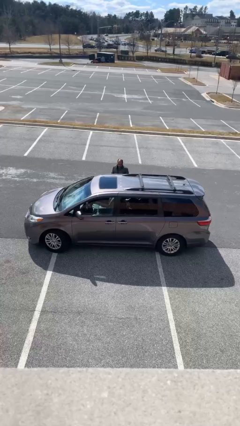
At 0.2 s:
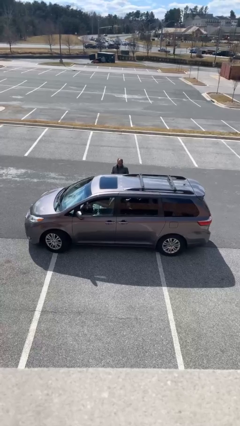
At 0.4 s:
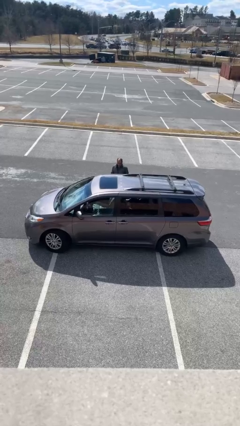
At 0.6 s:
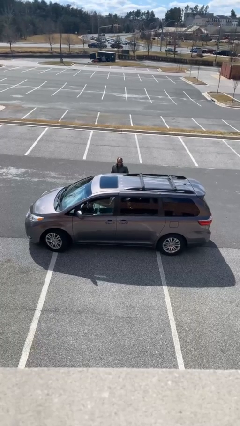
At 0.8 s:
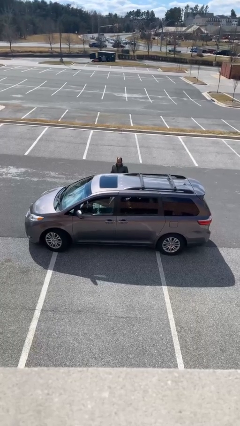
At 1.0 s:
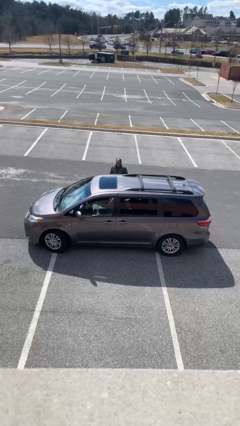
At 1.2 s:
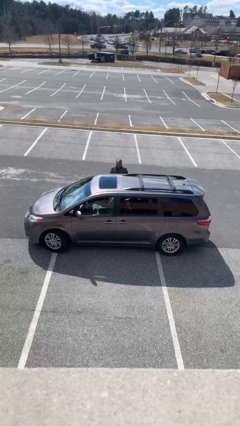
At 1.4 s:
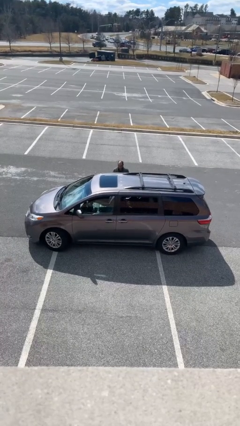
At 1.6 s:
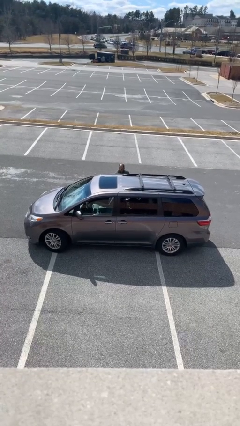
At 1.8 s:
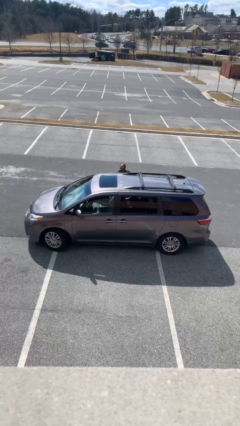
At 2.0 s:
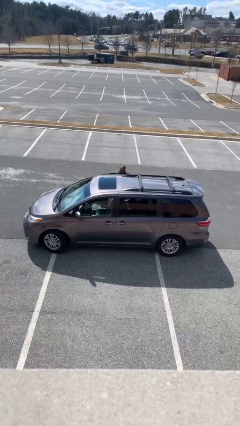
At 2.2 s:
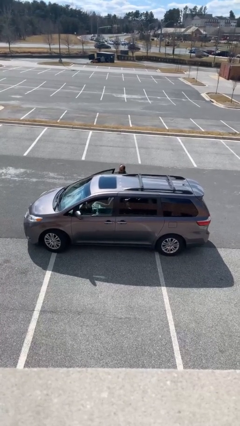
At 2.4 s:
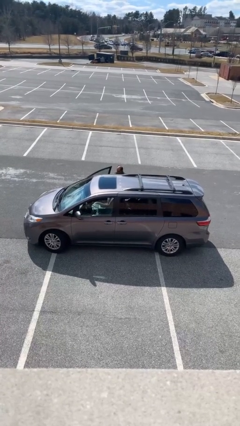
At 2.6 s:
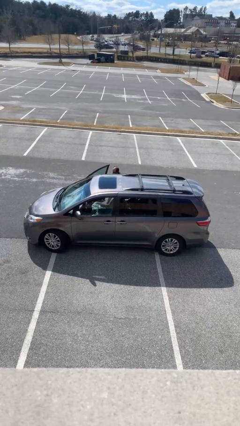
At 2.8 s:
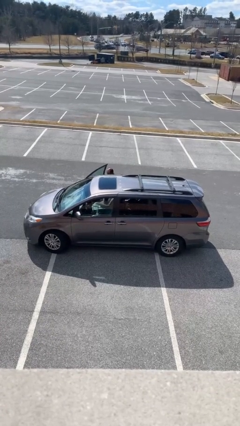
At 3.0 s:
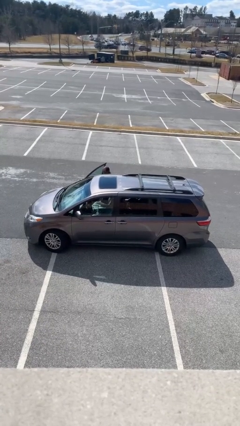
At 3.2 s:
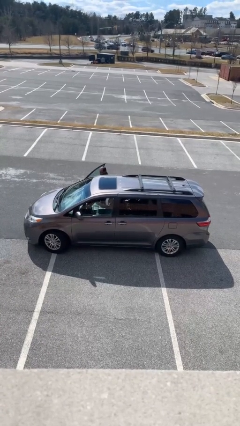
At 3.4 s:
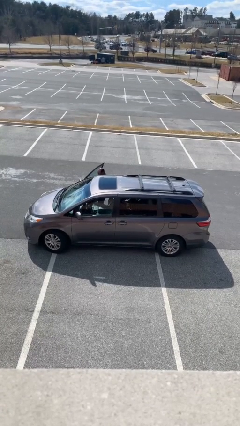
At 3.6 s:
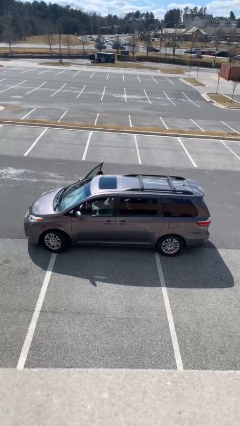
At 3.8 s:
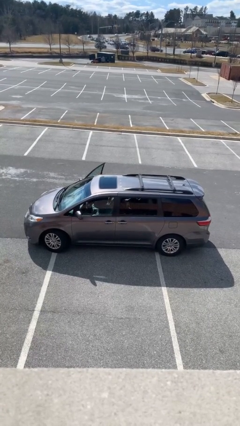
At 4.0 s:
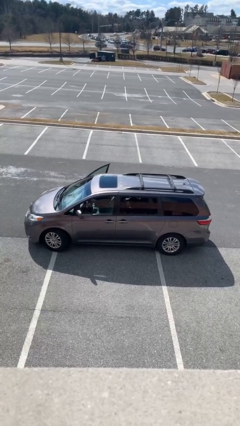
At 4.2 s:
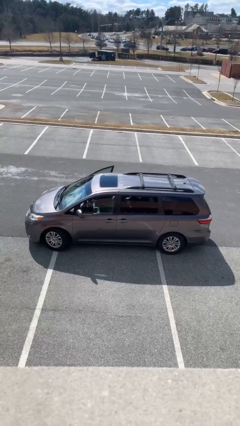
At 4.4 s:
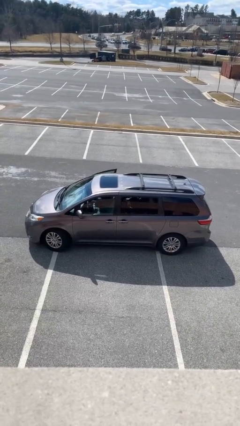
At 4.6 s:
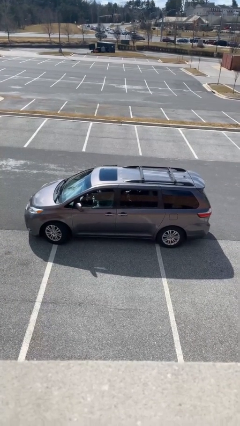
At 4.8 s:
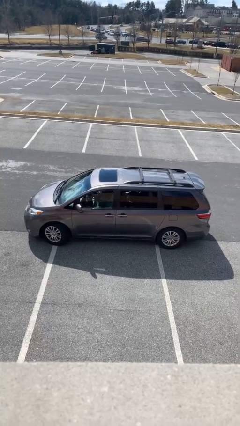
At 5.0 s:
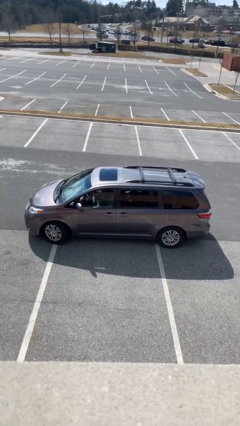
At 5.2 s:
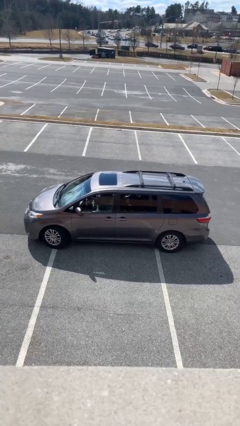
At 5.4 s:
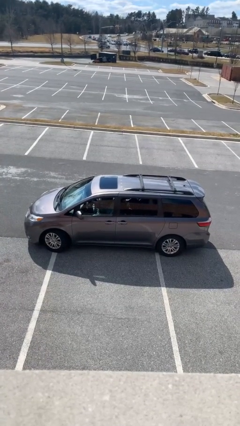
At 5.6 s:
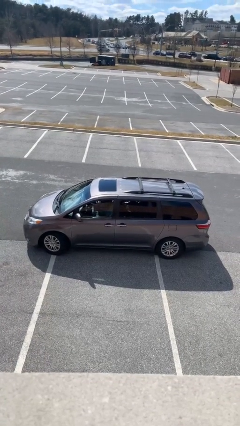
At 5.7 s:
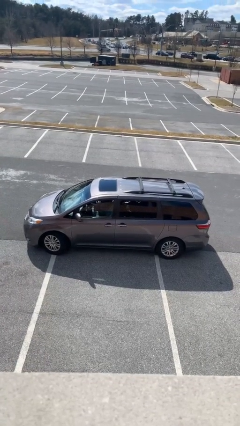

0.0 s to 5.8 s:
car picks up person

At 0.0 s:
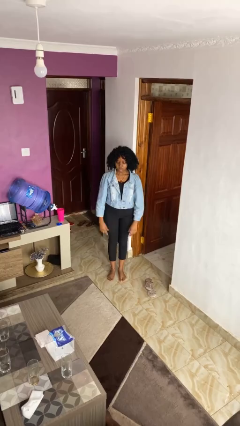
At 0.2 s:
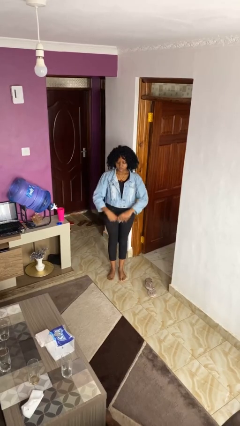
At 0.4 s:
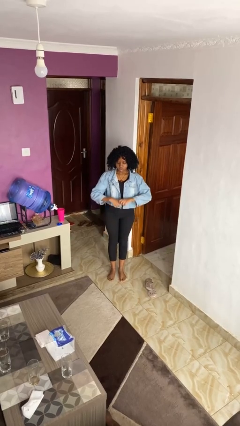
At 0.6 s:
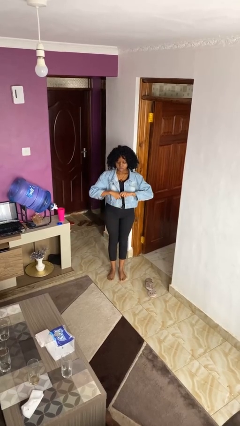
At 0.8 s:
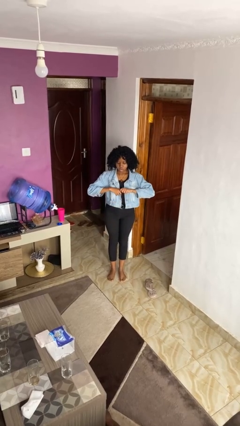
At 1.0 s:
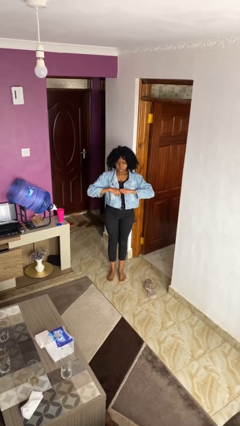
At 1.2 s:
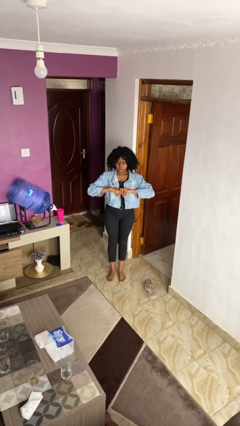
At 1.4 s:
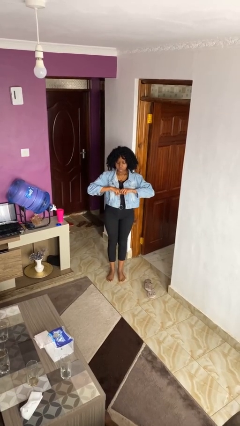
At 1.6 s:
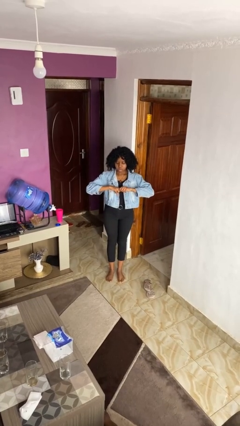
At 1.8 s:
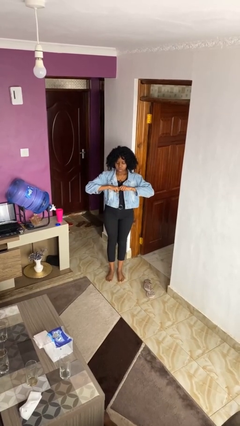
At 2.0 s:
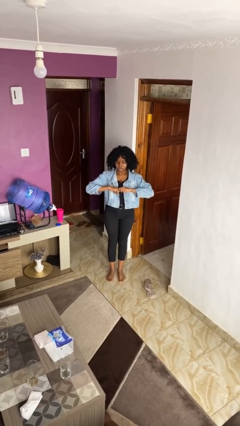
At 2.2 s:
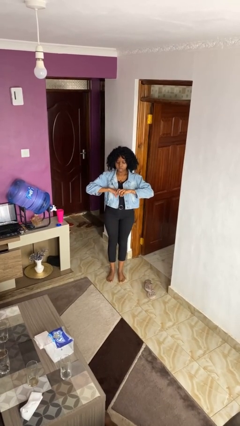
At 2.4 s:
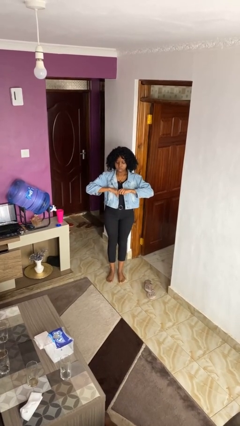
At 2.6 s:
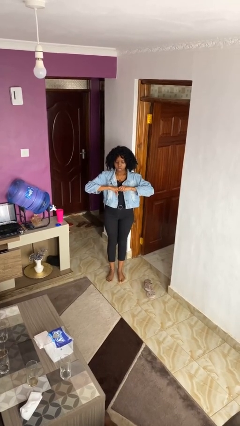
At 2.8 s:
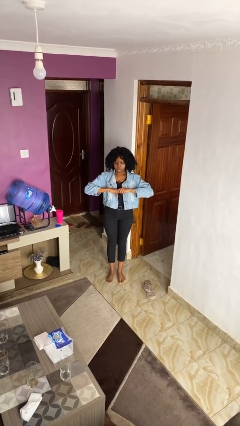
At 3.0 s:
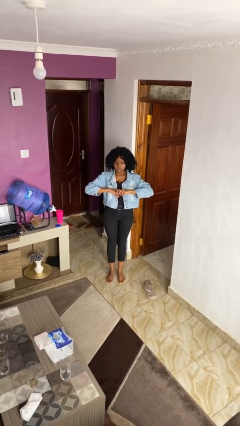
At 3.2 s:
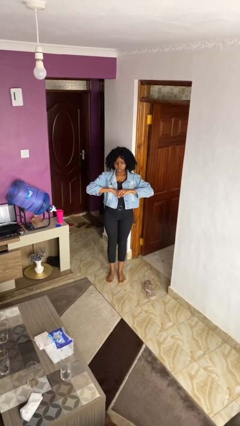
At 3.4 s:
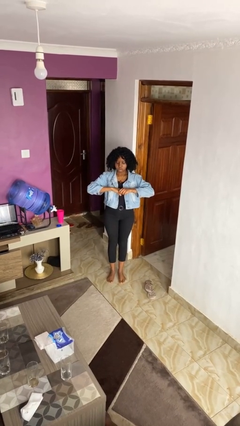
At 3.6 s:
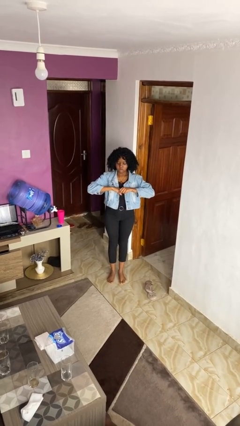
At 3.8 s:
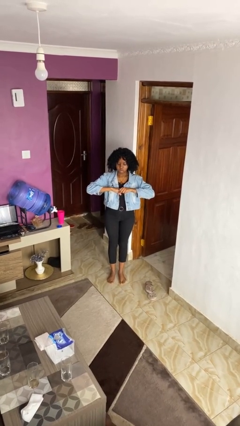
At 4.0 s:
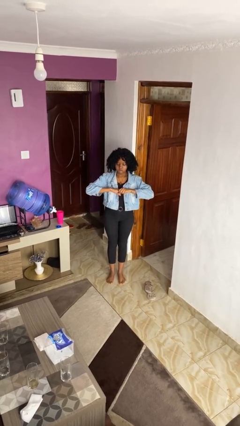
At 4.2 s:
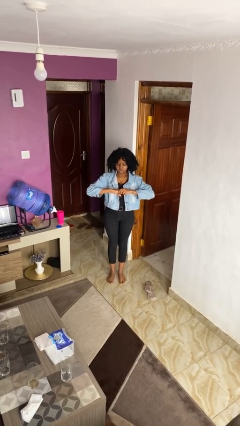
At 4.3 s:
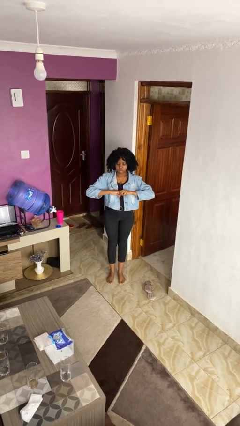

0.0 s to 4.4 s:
person cracks knuckles

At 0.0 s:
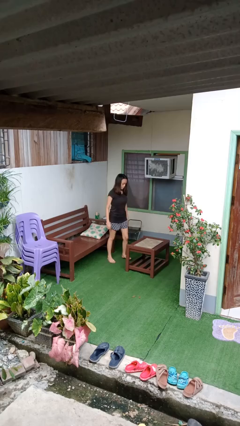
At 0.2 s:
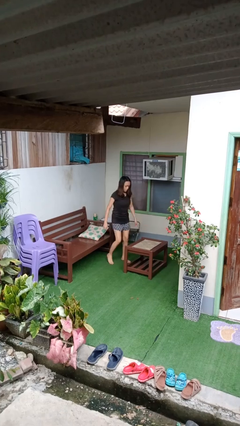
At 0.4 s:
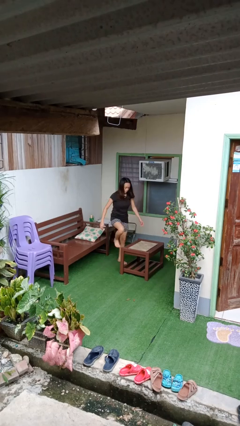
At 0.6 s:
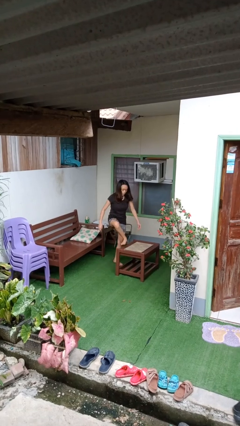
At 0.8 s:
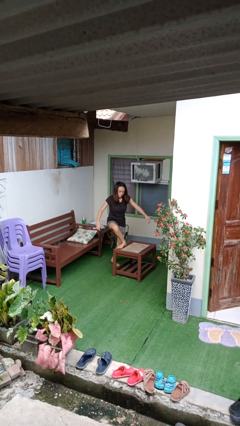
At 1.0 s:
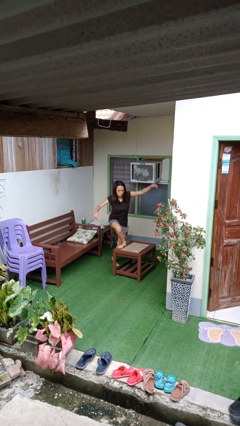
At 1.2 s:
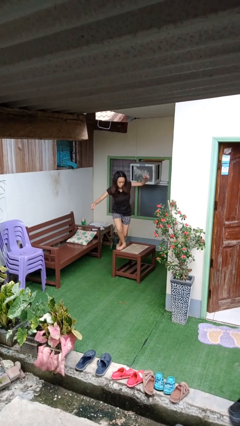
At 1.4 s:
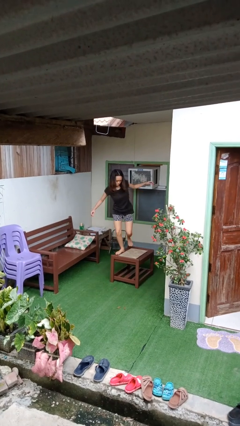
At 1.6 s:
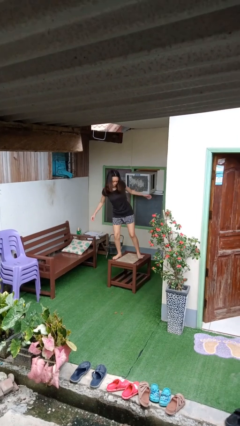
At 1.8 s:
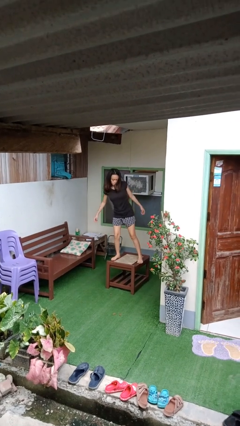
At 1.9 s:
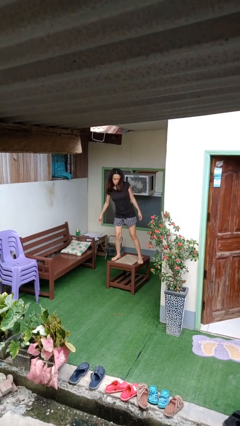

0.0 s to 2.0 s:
person climbs on table

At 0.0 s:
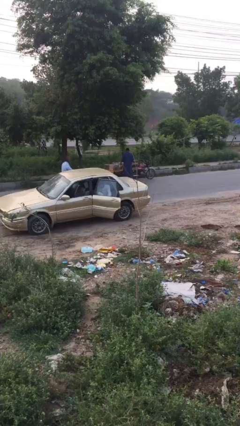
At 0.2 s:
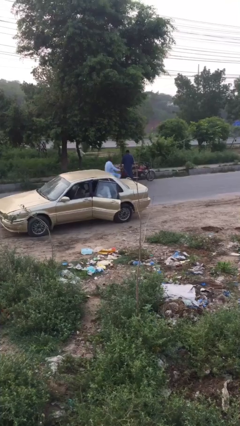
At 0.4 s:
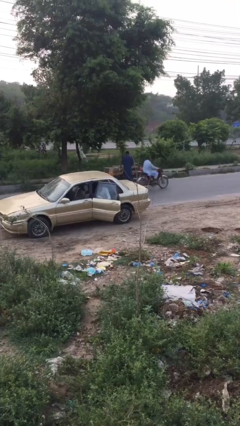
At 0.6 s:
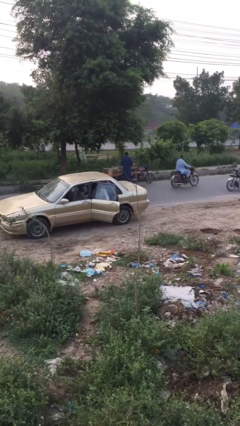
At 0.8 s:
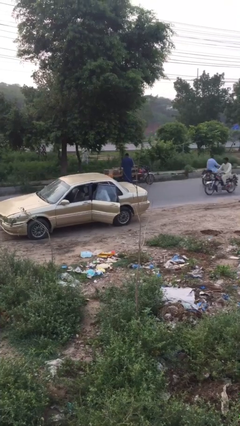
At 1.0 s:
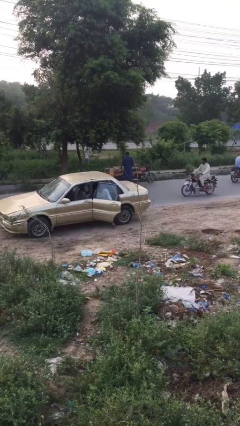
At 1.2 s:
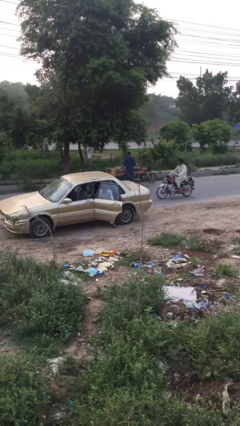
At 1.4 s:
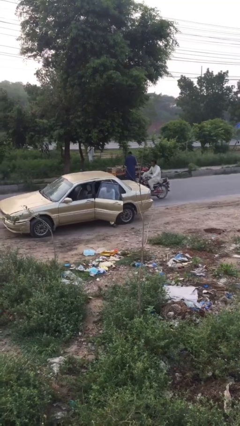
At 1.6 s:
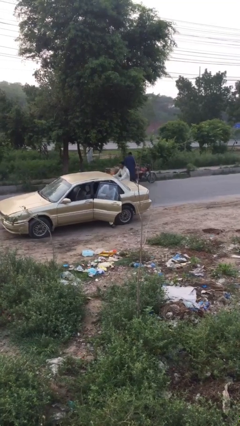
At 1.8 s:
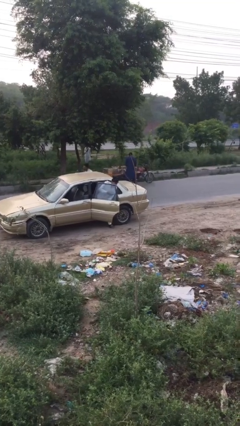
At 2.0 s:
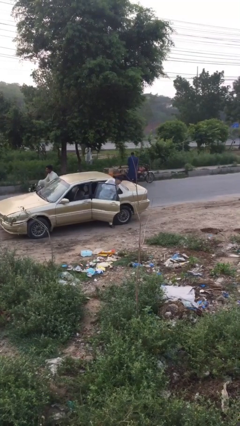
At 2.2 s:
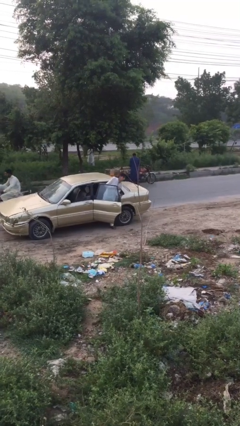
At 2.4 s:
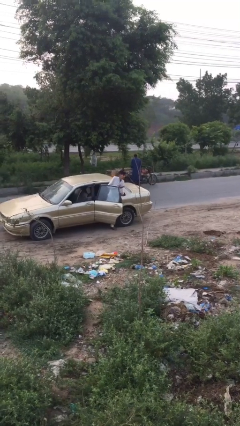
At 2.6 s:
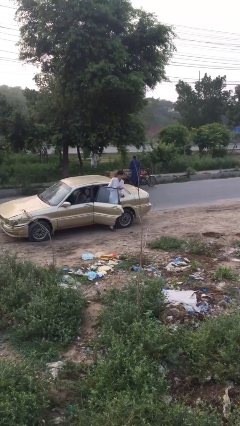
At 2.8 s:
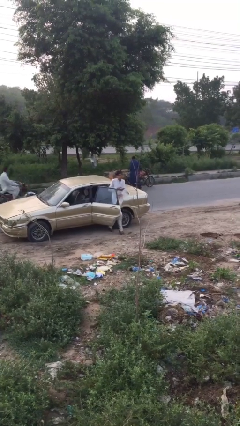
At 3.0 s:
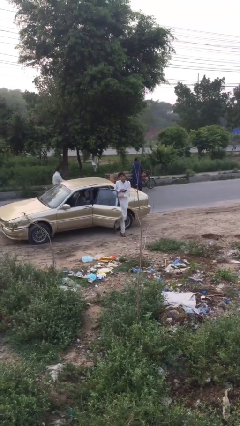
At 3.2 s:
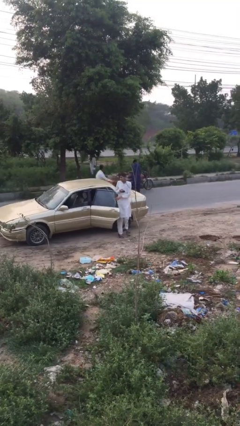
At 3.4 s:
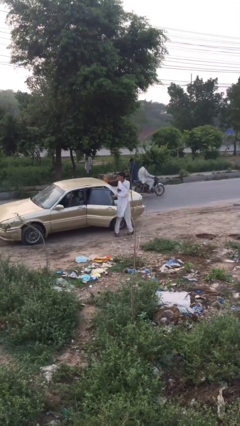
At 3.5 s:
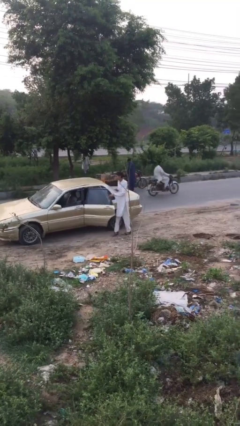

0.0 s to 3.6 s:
person exits car

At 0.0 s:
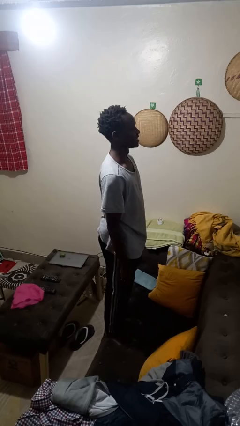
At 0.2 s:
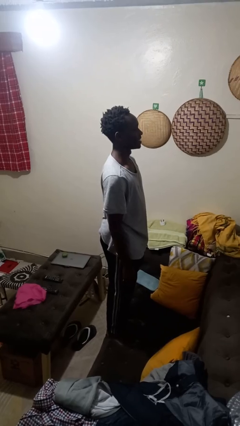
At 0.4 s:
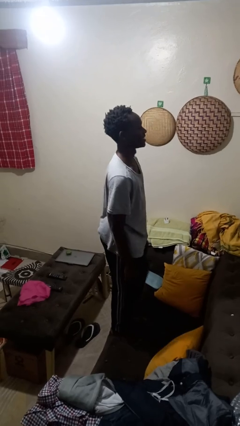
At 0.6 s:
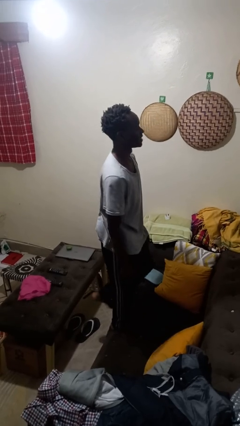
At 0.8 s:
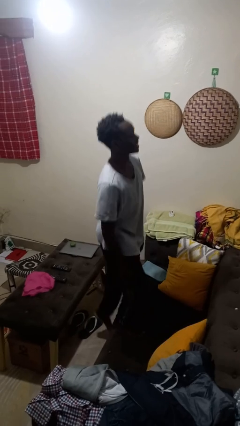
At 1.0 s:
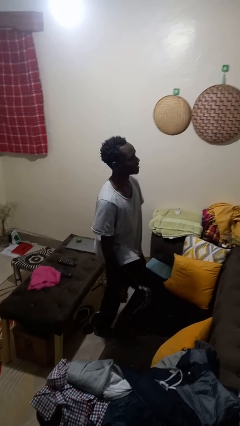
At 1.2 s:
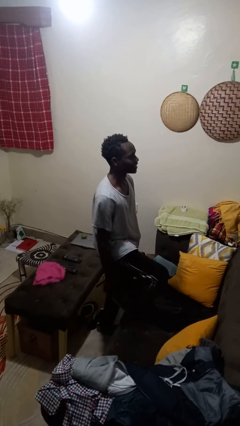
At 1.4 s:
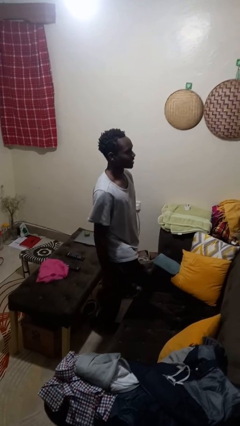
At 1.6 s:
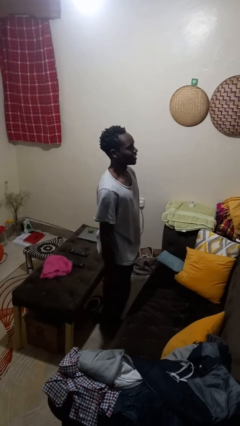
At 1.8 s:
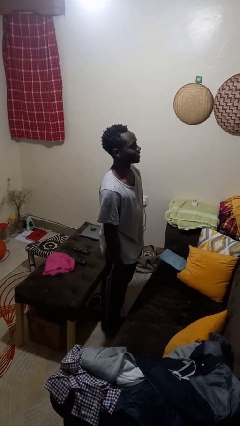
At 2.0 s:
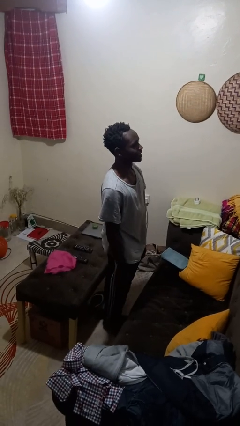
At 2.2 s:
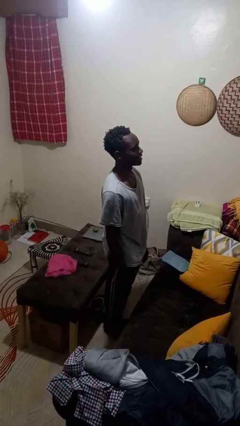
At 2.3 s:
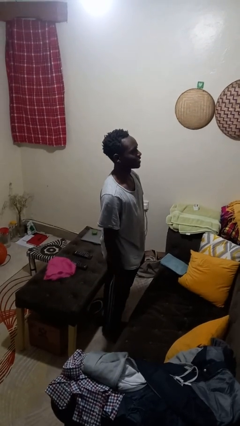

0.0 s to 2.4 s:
person climbs off couch
